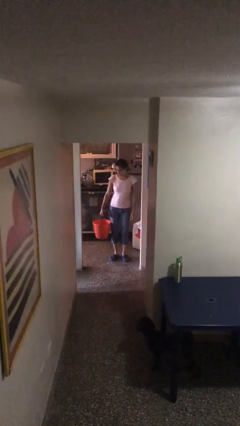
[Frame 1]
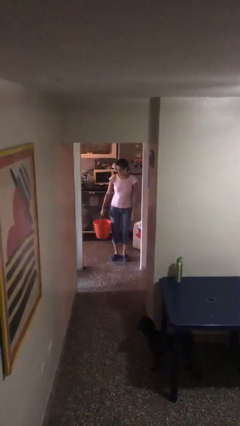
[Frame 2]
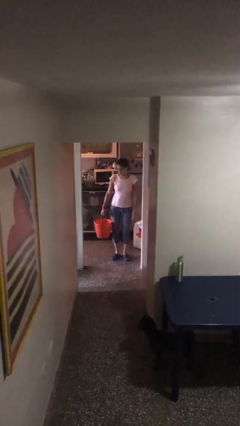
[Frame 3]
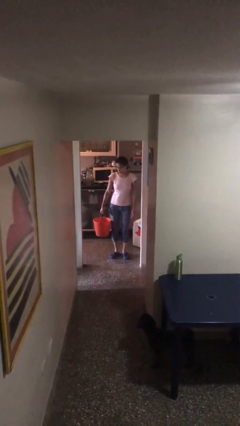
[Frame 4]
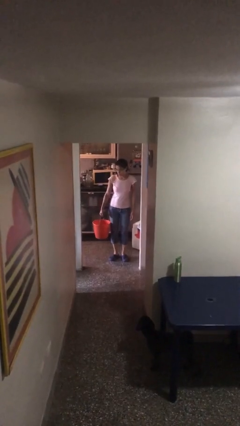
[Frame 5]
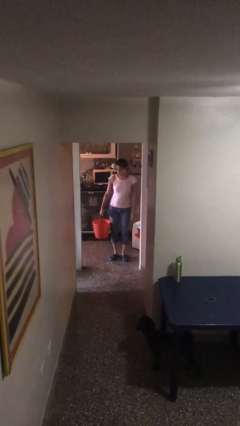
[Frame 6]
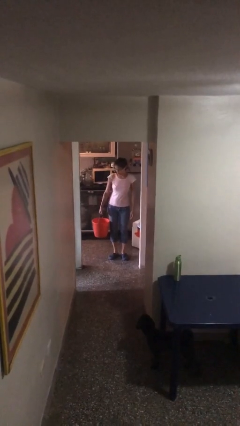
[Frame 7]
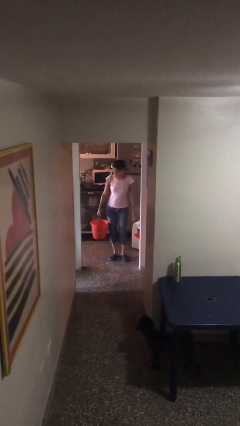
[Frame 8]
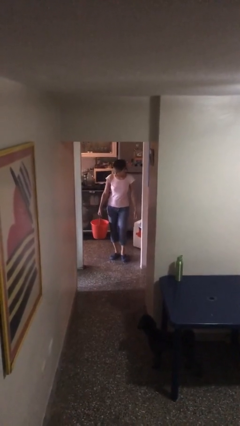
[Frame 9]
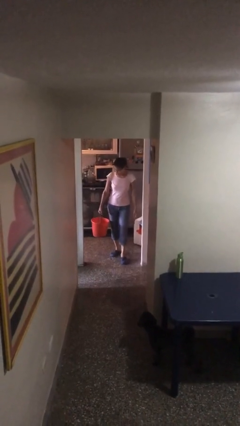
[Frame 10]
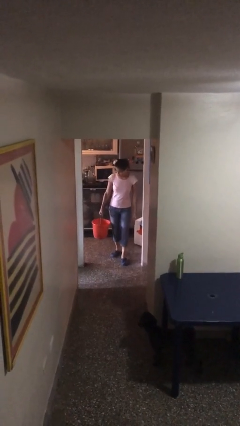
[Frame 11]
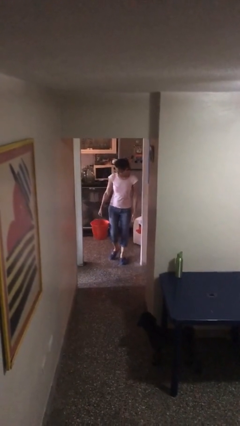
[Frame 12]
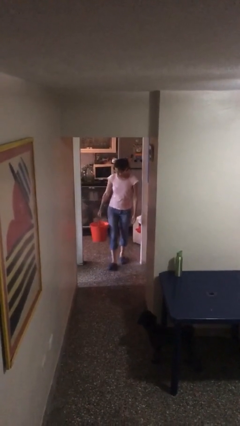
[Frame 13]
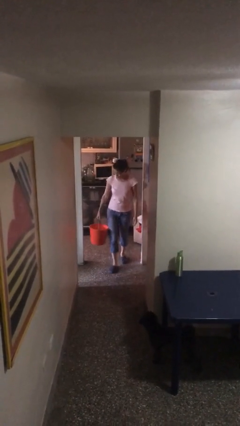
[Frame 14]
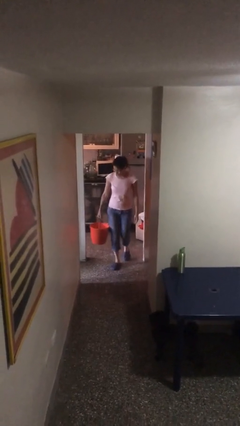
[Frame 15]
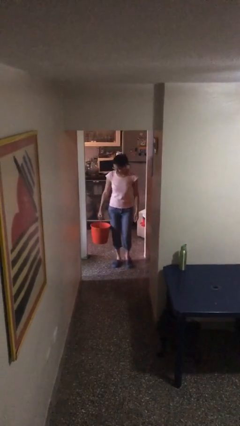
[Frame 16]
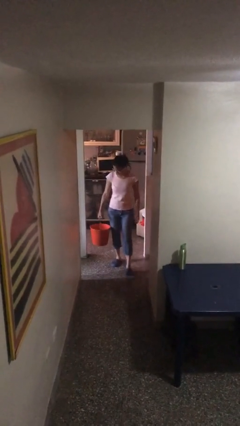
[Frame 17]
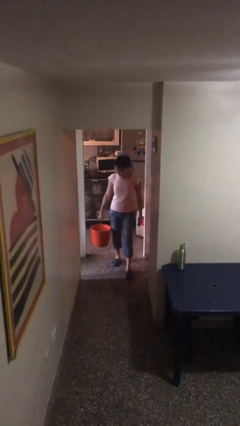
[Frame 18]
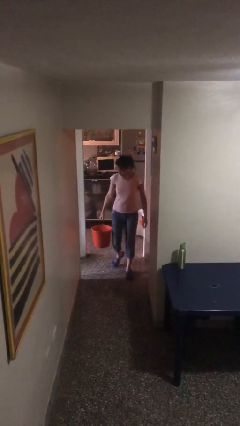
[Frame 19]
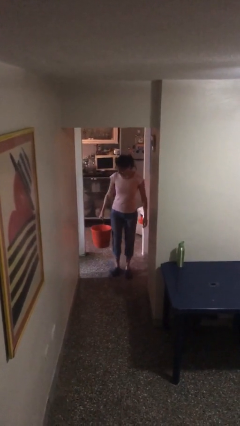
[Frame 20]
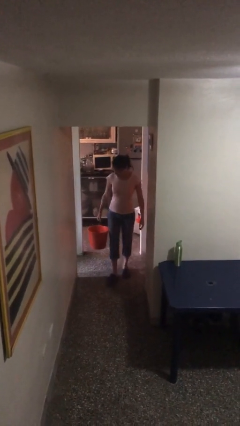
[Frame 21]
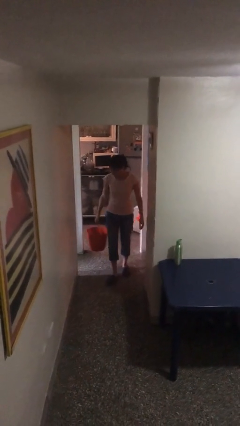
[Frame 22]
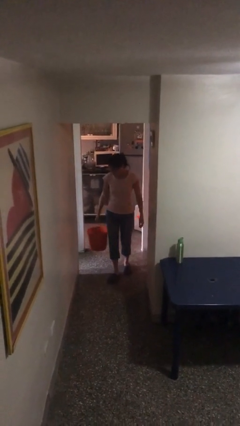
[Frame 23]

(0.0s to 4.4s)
person carries heavy object

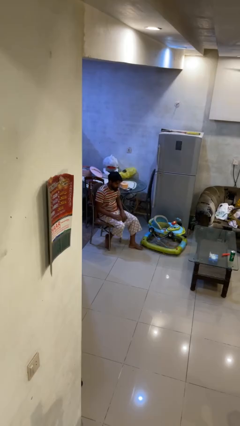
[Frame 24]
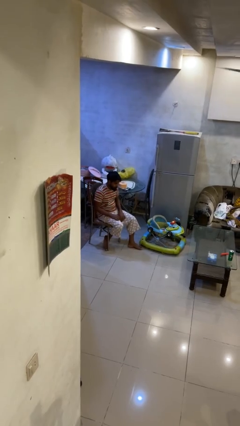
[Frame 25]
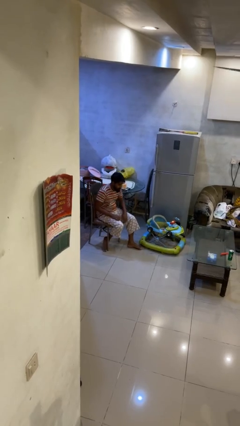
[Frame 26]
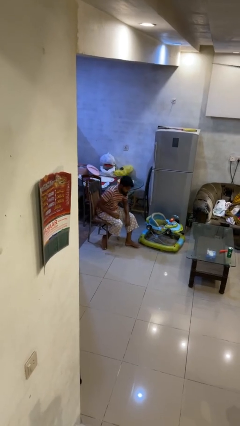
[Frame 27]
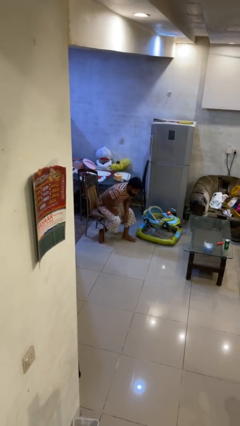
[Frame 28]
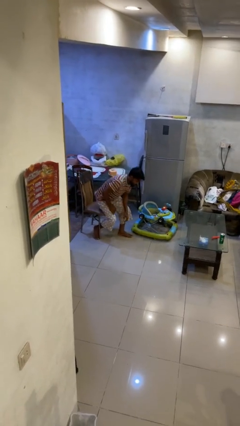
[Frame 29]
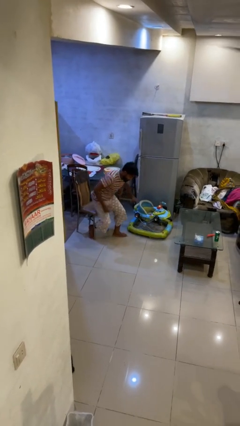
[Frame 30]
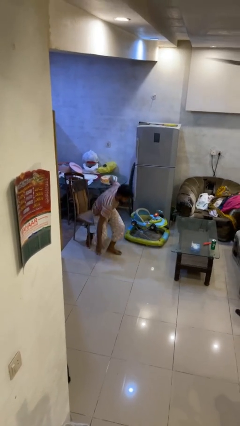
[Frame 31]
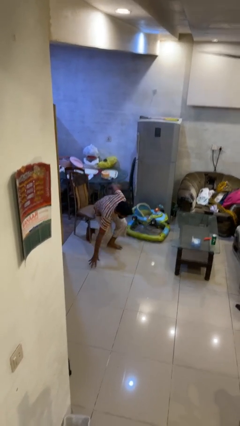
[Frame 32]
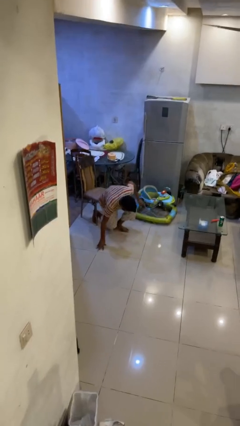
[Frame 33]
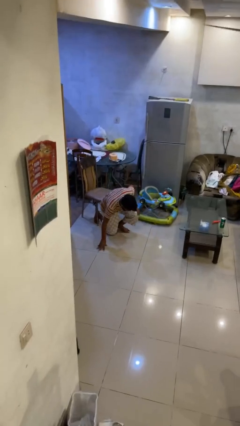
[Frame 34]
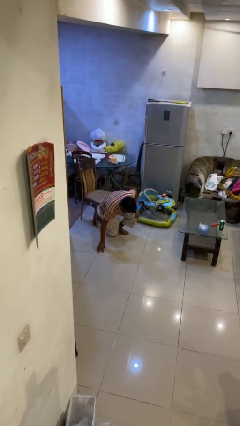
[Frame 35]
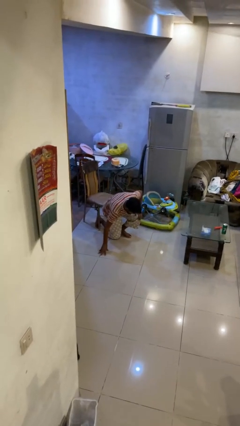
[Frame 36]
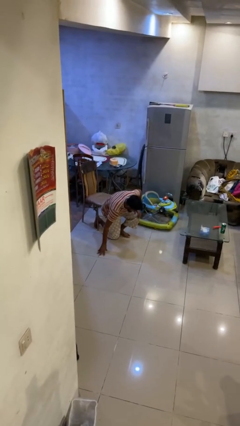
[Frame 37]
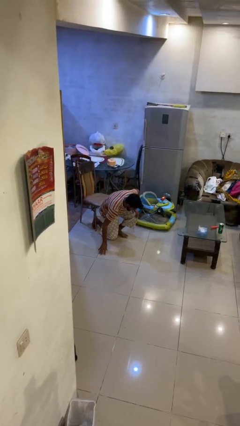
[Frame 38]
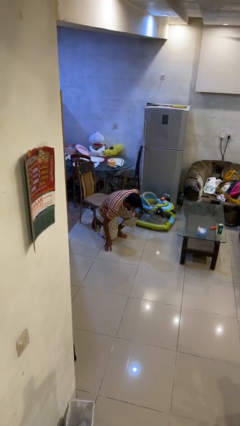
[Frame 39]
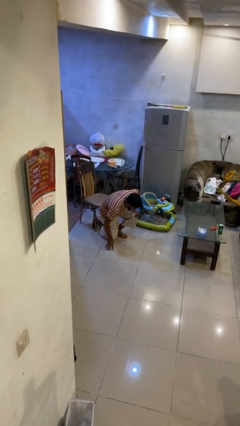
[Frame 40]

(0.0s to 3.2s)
person falls from chair

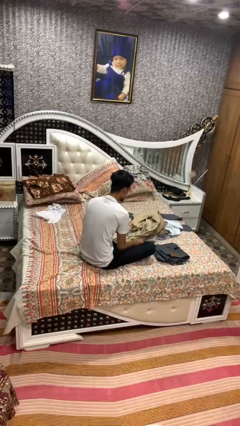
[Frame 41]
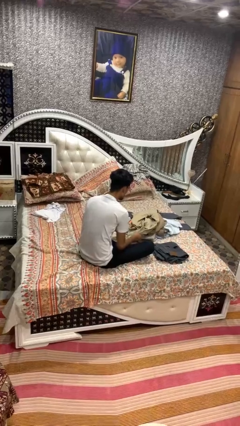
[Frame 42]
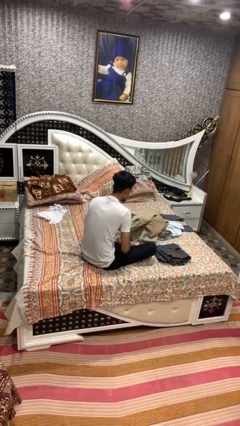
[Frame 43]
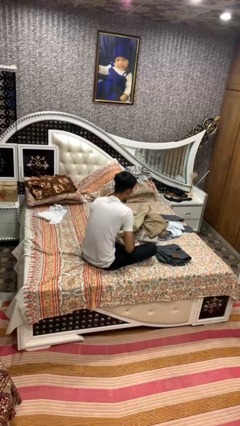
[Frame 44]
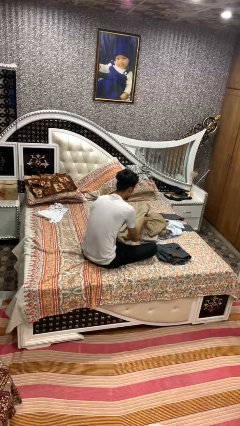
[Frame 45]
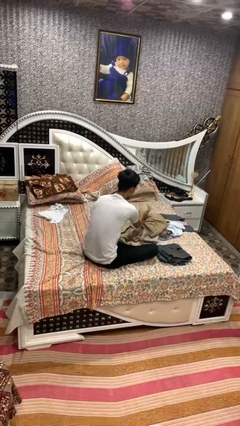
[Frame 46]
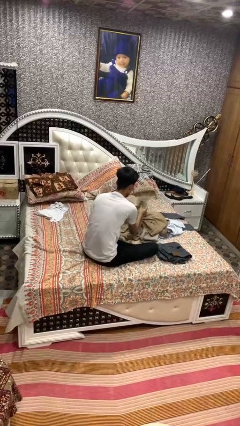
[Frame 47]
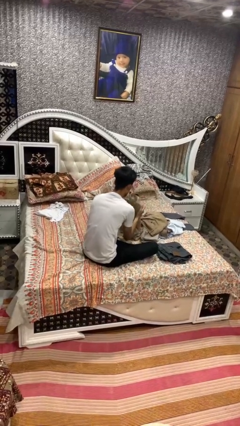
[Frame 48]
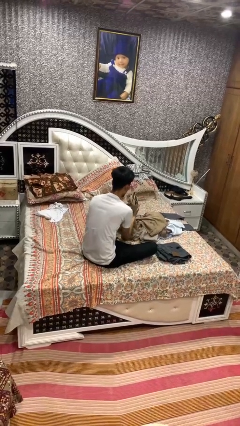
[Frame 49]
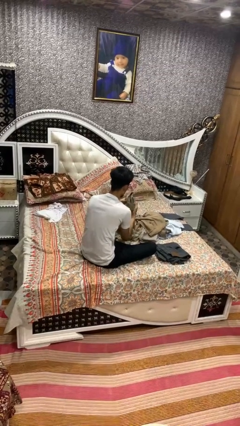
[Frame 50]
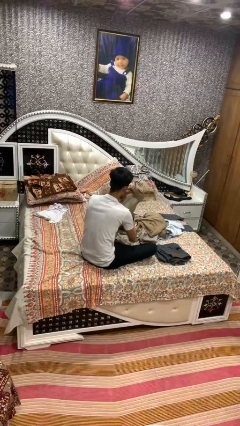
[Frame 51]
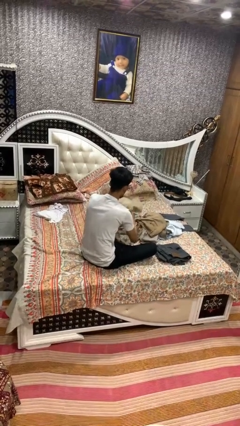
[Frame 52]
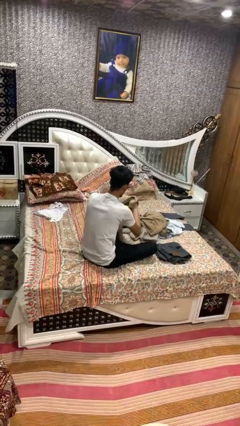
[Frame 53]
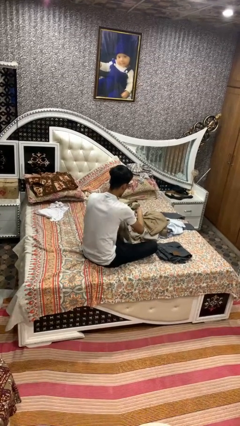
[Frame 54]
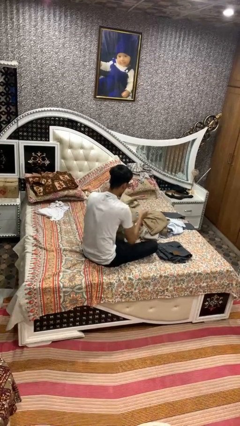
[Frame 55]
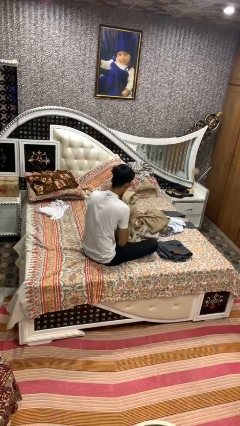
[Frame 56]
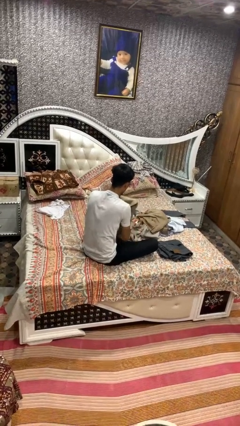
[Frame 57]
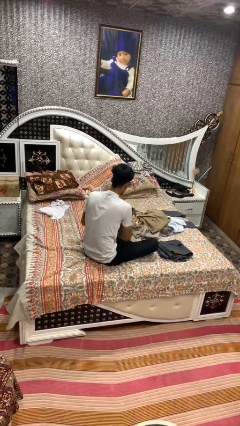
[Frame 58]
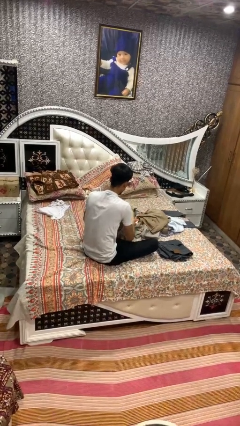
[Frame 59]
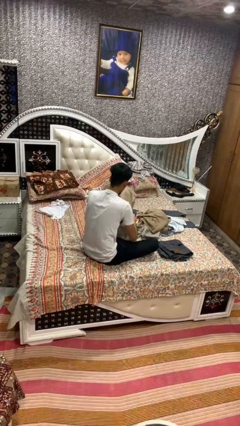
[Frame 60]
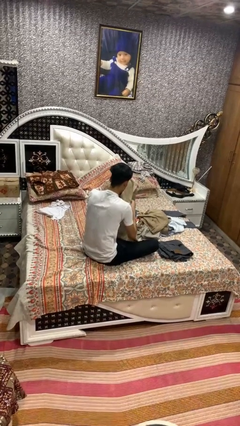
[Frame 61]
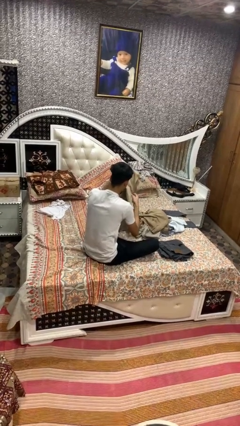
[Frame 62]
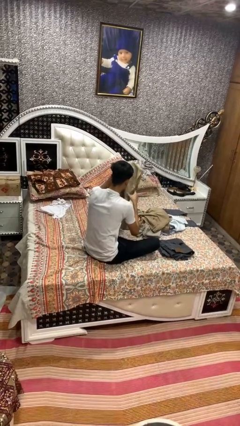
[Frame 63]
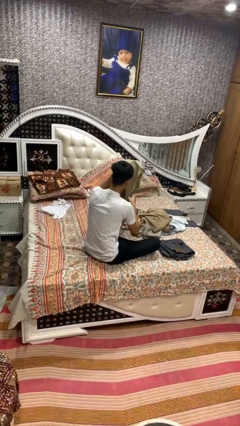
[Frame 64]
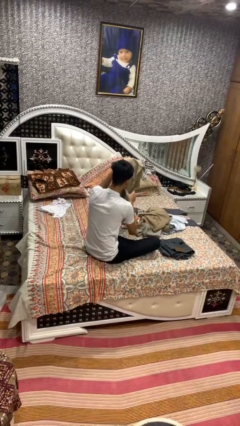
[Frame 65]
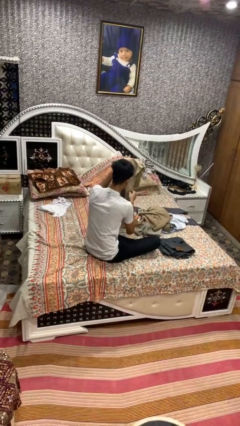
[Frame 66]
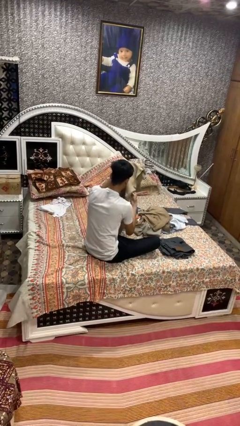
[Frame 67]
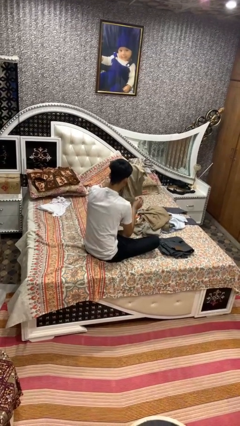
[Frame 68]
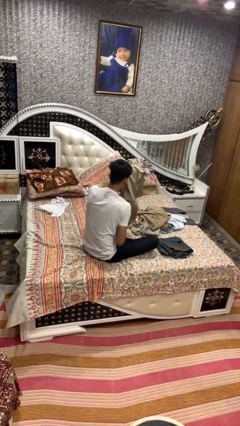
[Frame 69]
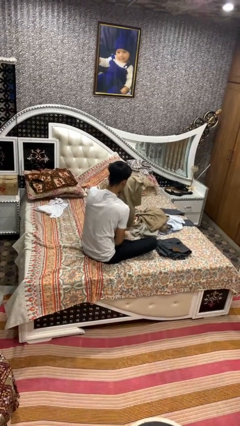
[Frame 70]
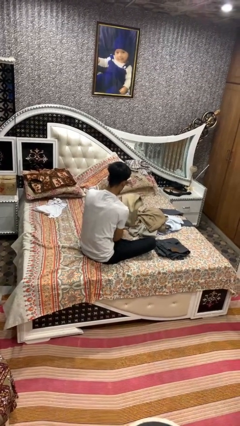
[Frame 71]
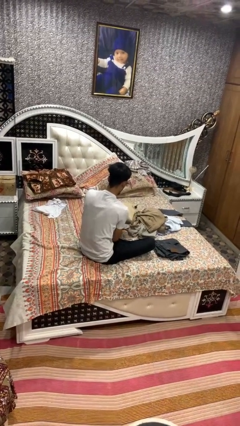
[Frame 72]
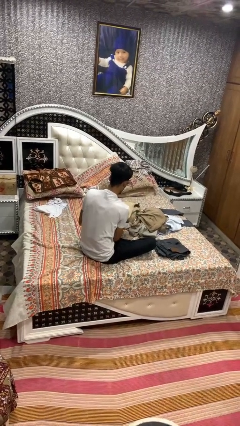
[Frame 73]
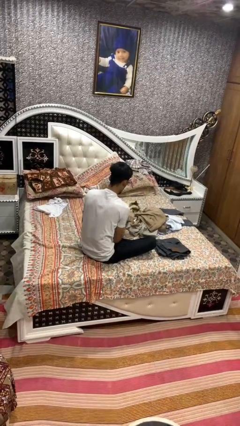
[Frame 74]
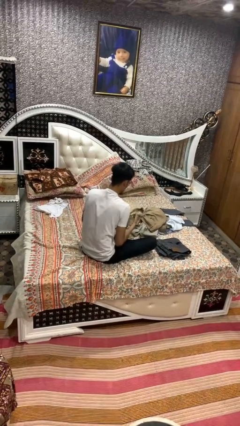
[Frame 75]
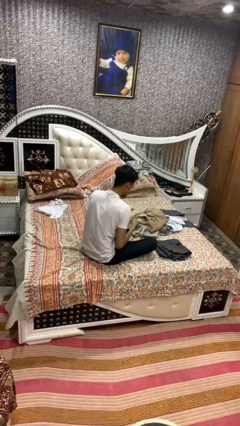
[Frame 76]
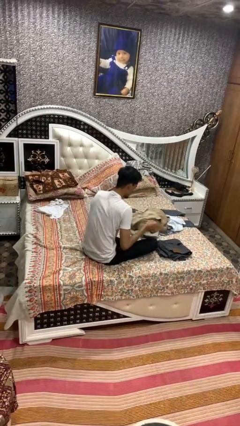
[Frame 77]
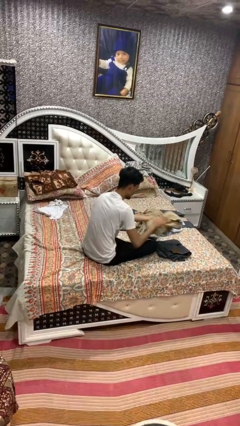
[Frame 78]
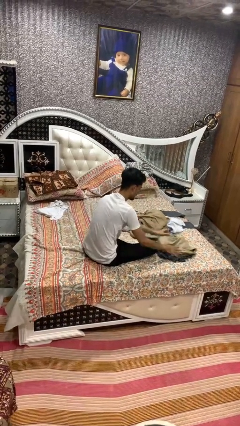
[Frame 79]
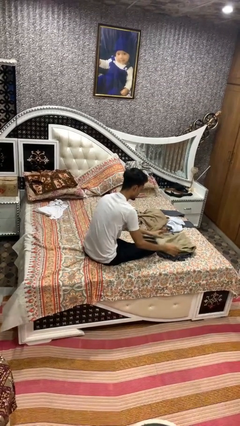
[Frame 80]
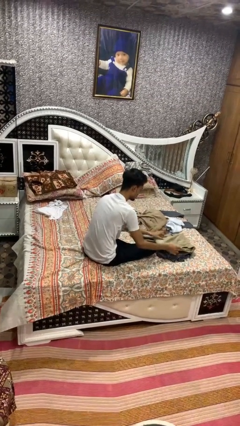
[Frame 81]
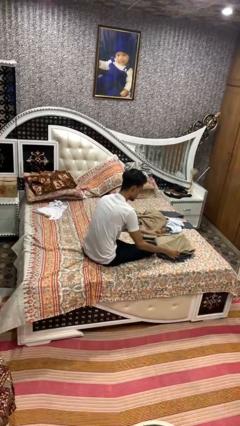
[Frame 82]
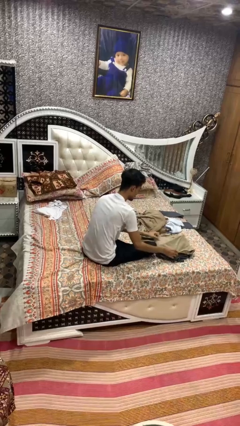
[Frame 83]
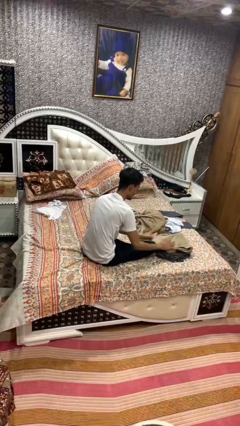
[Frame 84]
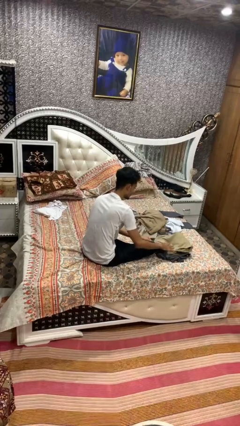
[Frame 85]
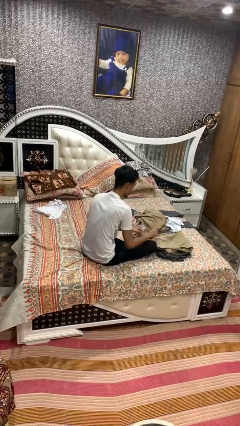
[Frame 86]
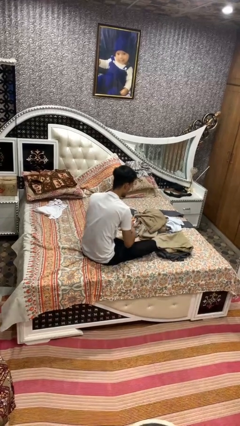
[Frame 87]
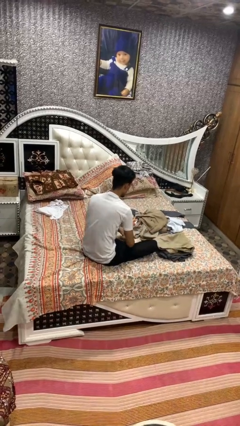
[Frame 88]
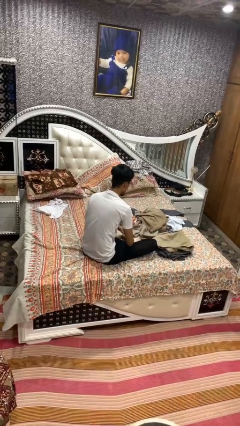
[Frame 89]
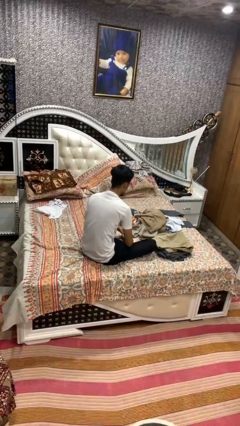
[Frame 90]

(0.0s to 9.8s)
person folds pants

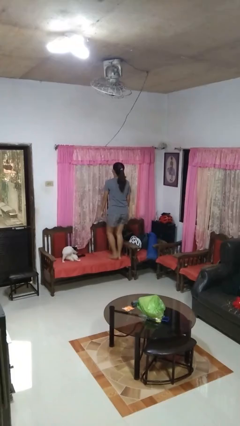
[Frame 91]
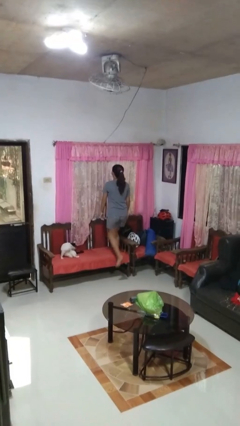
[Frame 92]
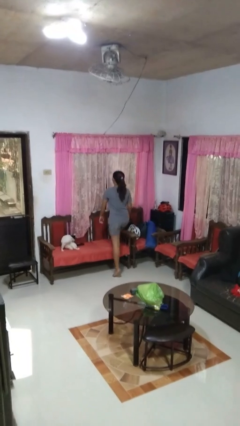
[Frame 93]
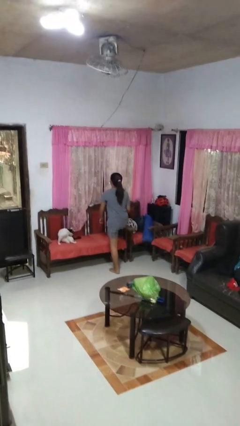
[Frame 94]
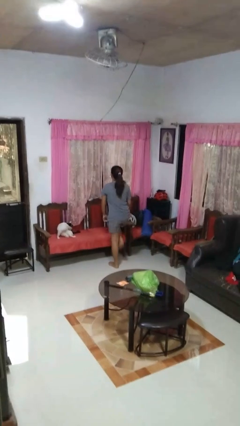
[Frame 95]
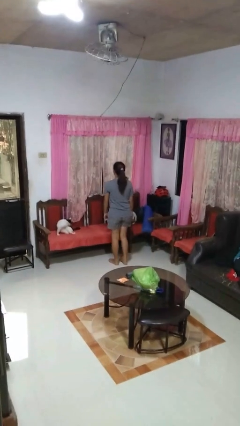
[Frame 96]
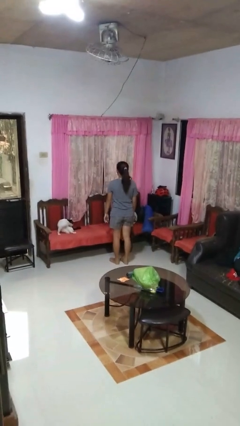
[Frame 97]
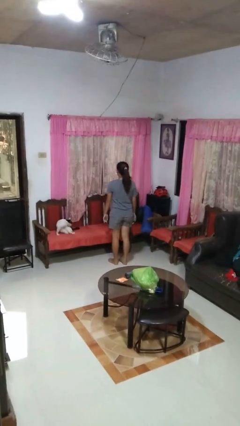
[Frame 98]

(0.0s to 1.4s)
person climbs off chair
